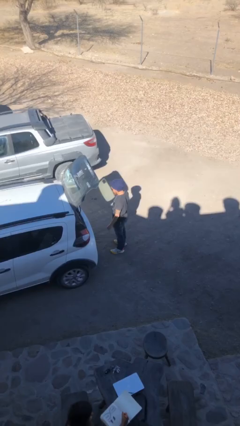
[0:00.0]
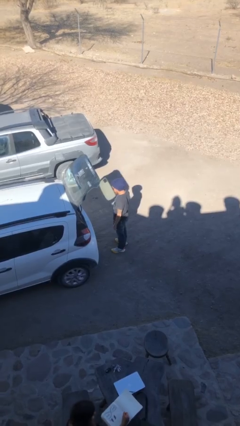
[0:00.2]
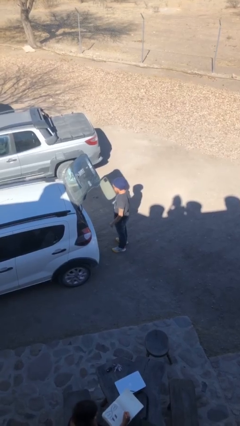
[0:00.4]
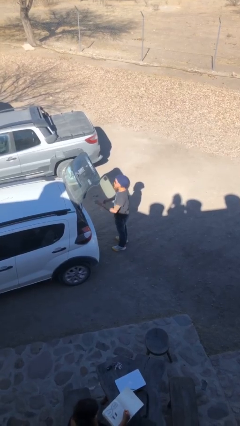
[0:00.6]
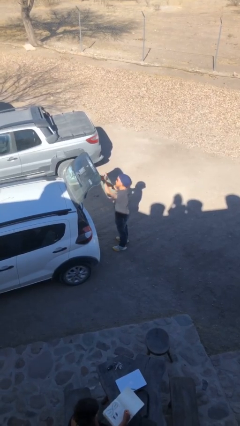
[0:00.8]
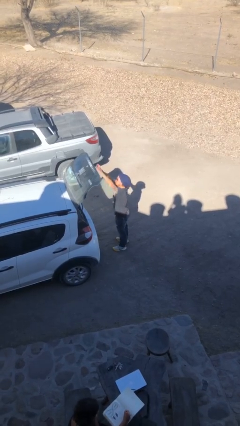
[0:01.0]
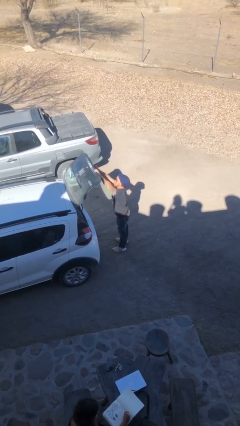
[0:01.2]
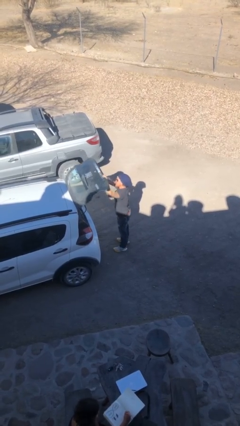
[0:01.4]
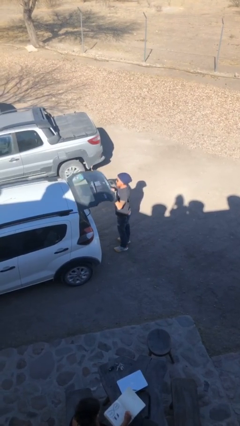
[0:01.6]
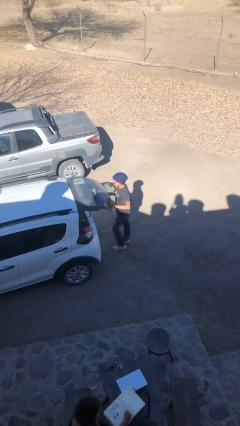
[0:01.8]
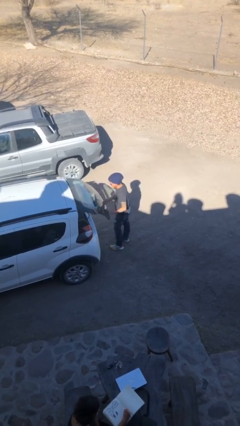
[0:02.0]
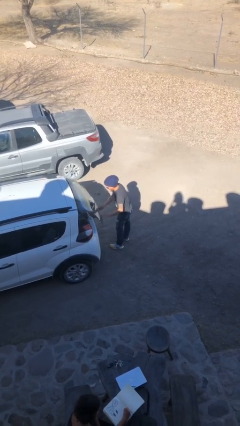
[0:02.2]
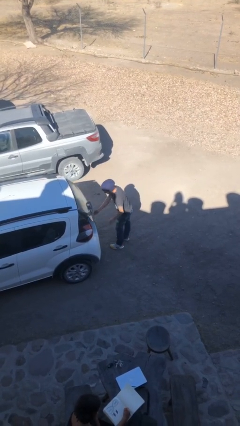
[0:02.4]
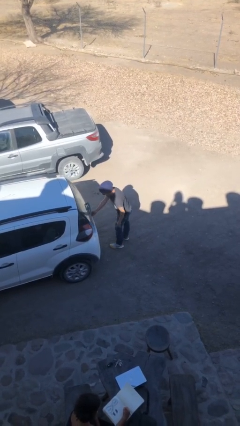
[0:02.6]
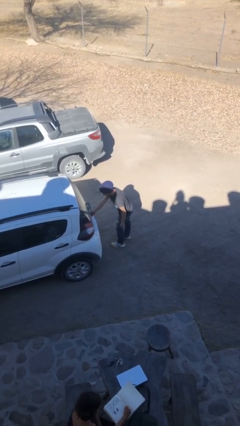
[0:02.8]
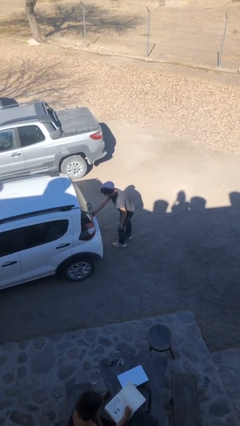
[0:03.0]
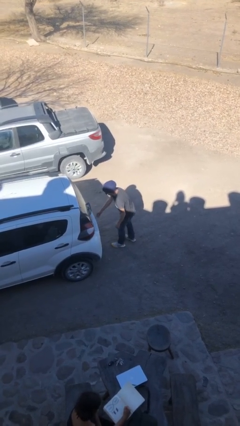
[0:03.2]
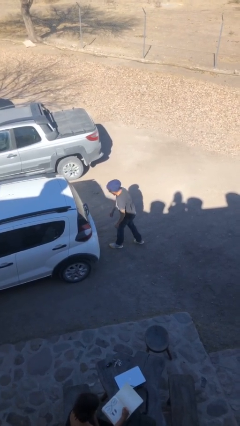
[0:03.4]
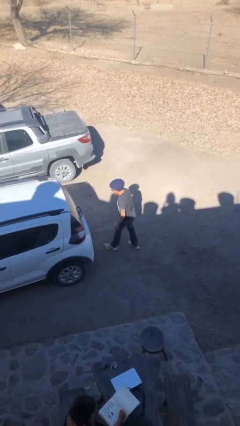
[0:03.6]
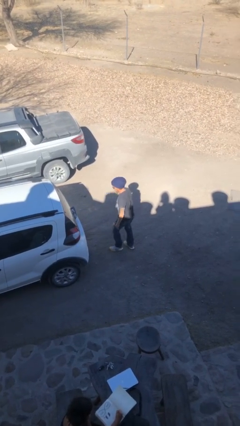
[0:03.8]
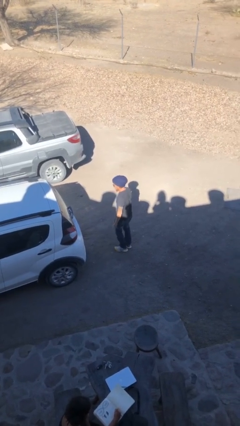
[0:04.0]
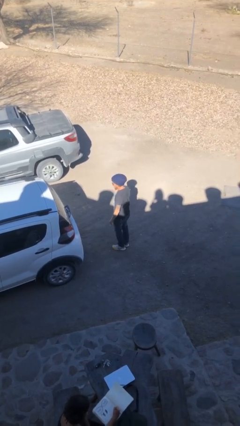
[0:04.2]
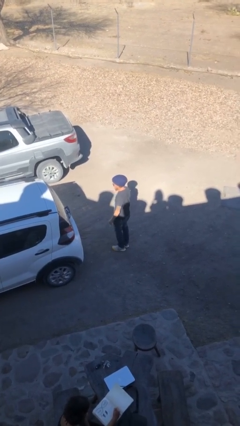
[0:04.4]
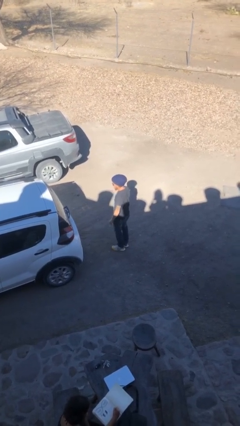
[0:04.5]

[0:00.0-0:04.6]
person closes car trunk

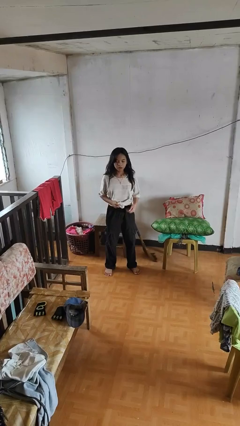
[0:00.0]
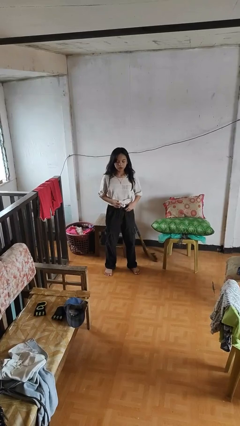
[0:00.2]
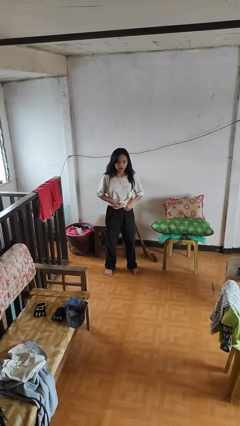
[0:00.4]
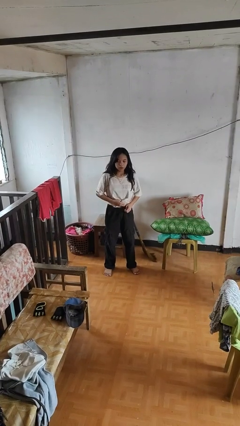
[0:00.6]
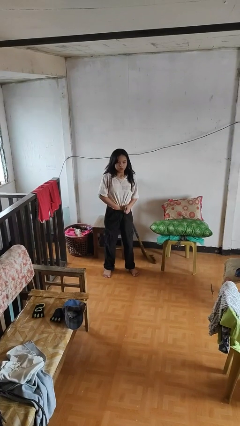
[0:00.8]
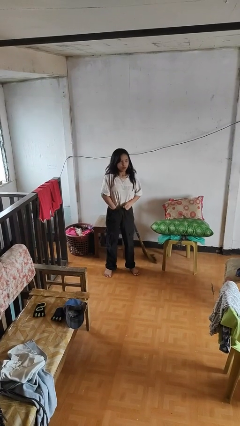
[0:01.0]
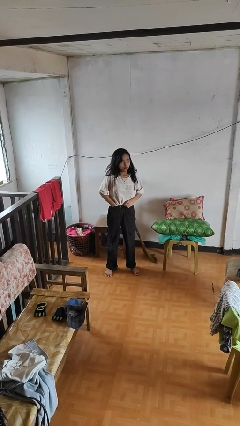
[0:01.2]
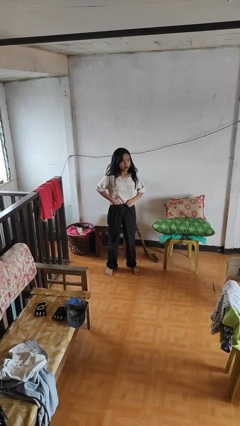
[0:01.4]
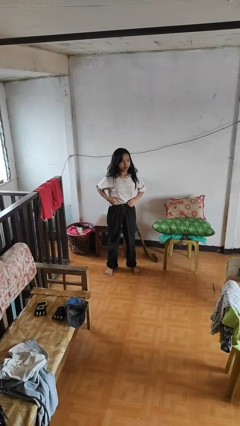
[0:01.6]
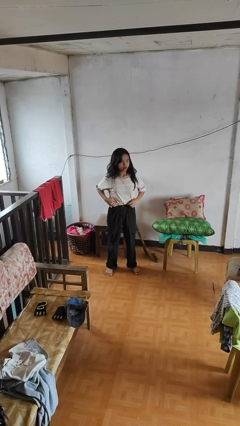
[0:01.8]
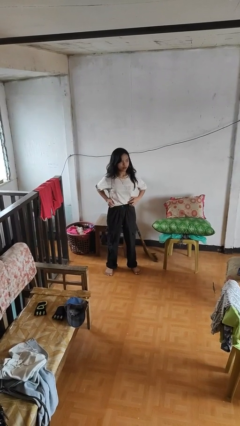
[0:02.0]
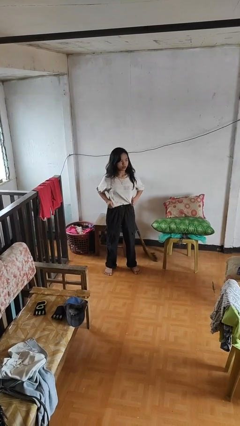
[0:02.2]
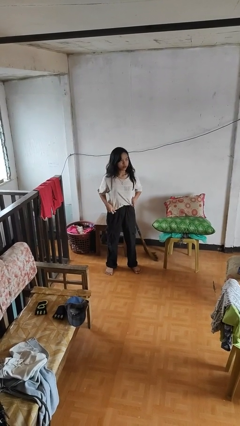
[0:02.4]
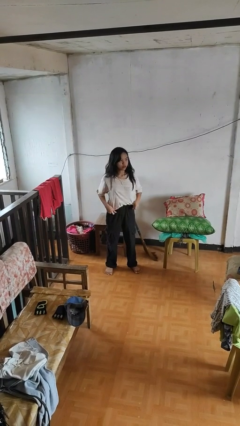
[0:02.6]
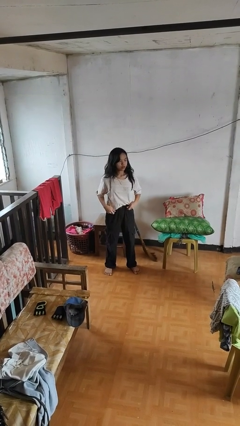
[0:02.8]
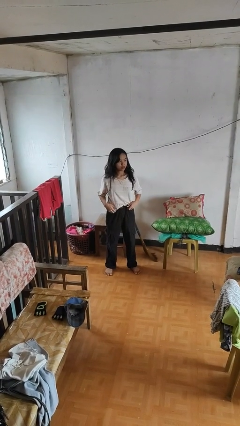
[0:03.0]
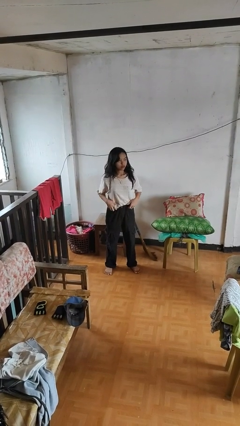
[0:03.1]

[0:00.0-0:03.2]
person tucks in shirt

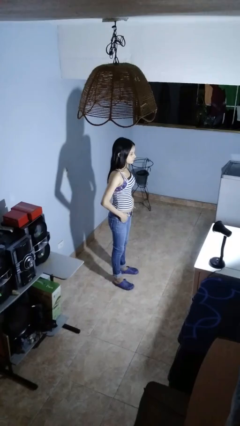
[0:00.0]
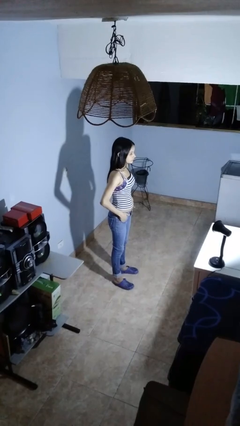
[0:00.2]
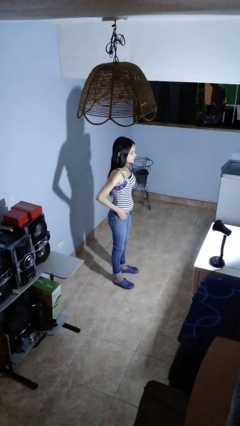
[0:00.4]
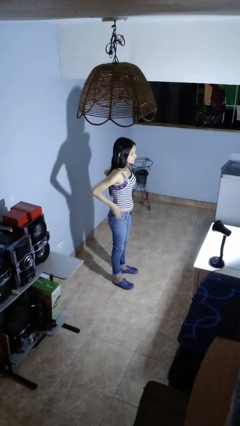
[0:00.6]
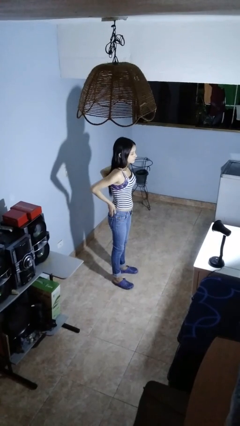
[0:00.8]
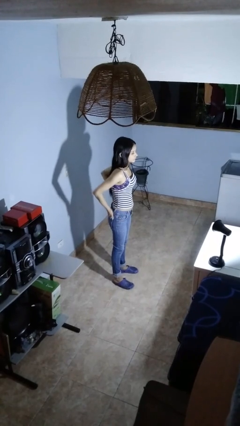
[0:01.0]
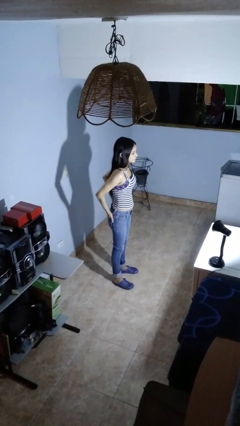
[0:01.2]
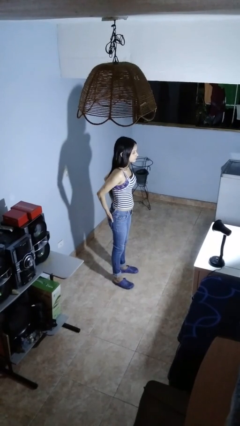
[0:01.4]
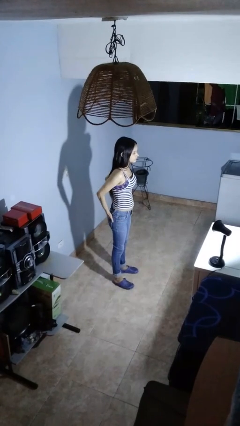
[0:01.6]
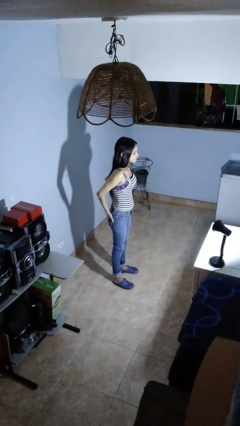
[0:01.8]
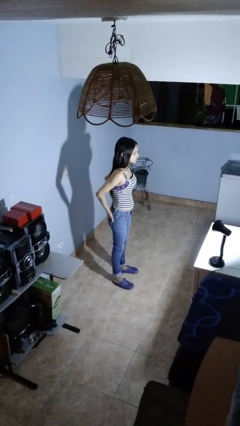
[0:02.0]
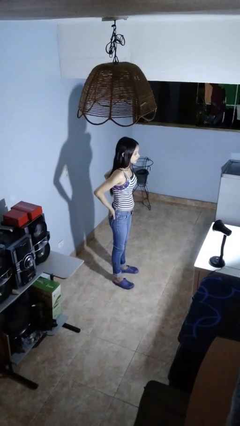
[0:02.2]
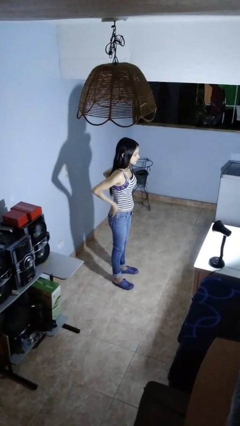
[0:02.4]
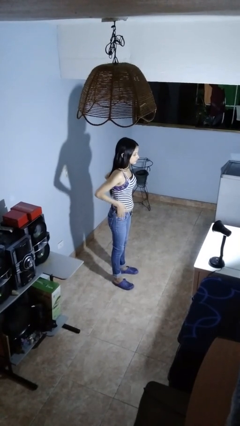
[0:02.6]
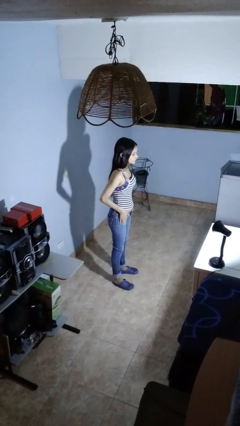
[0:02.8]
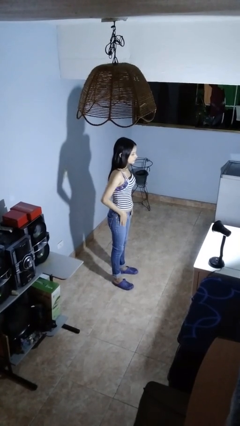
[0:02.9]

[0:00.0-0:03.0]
person puts hands in back pockets

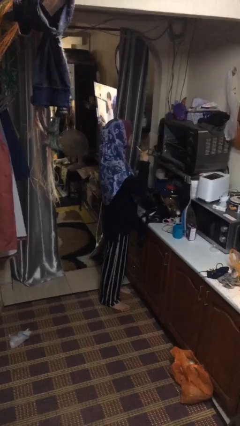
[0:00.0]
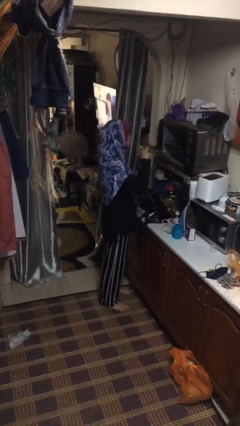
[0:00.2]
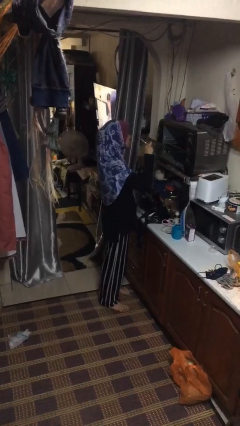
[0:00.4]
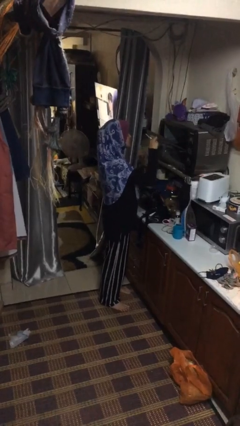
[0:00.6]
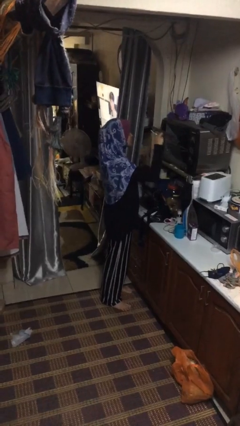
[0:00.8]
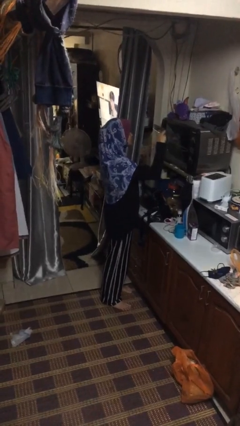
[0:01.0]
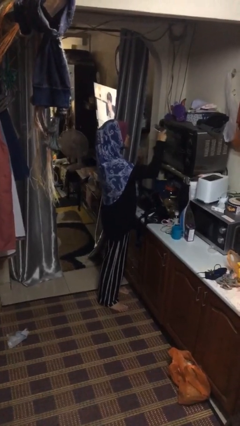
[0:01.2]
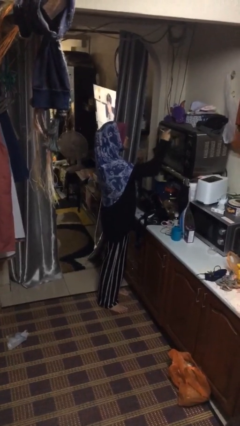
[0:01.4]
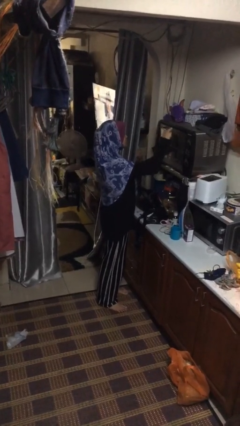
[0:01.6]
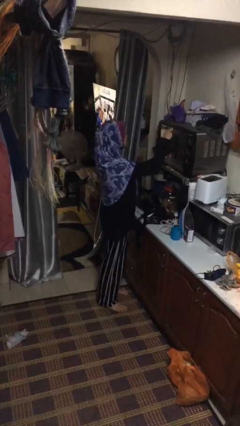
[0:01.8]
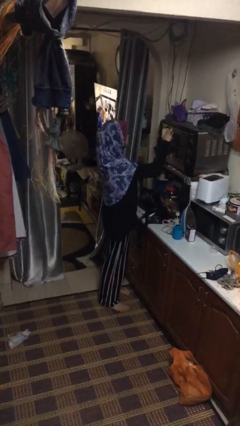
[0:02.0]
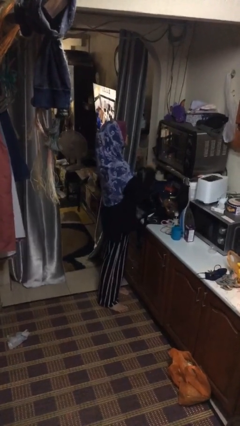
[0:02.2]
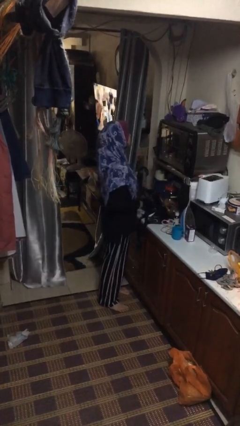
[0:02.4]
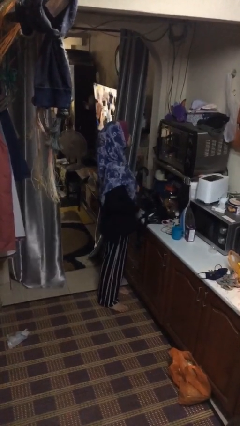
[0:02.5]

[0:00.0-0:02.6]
person closes oven door

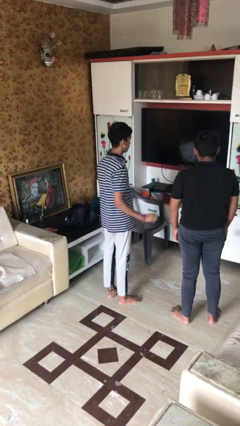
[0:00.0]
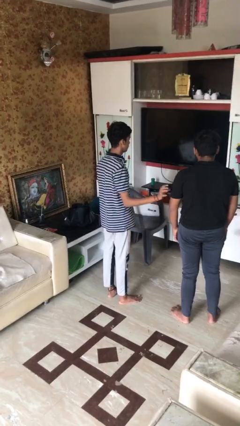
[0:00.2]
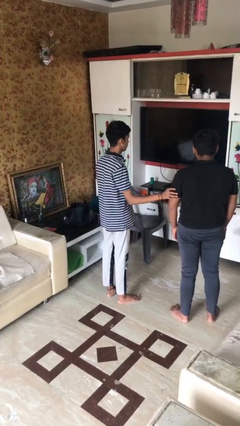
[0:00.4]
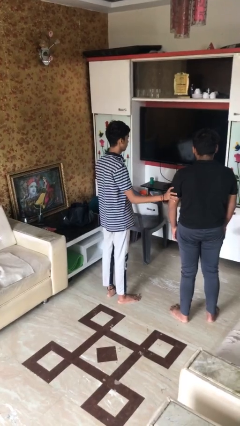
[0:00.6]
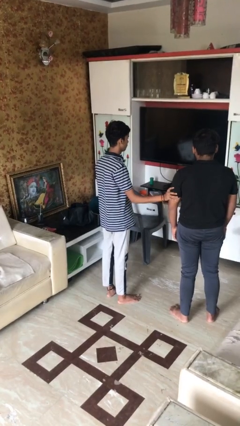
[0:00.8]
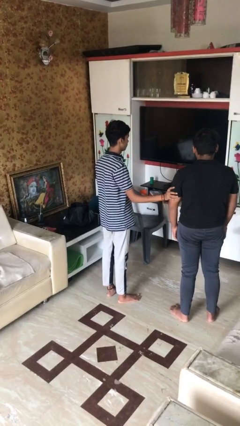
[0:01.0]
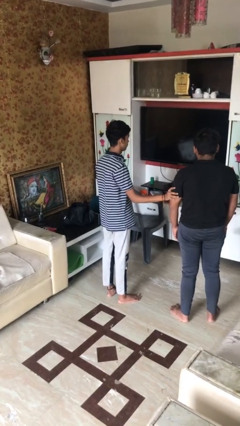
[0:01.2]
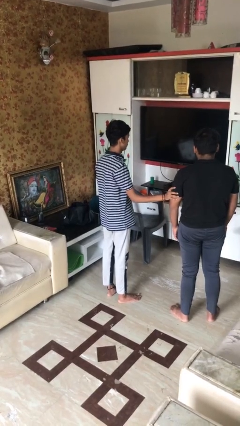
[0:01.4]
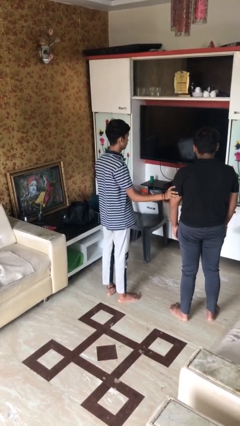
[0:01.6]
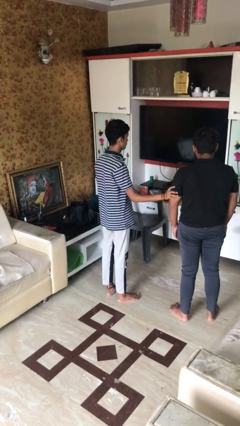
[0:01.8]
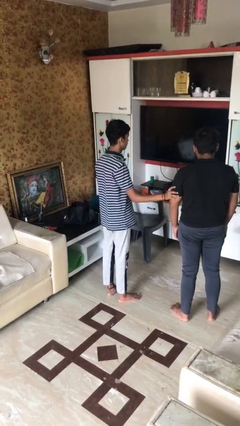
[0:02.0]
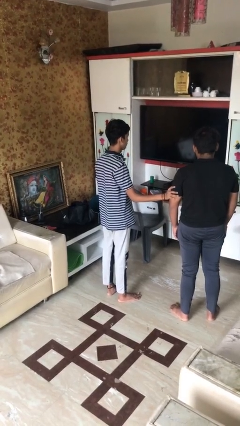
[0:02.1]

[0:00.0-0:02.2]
person grabs person by bicep

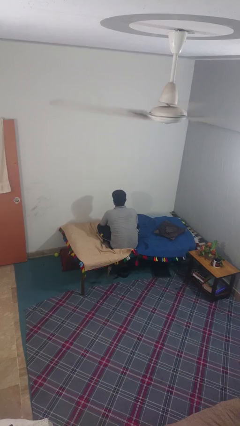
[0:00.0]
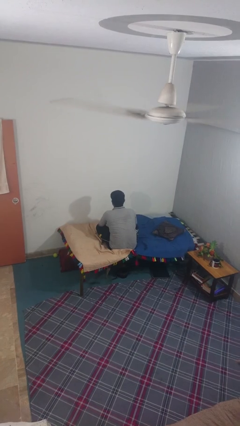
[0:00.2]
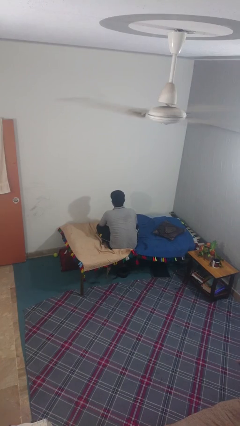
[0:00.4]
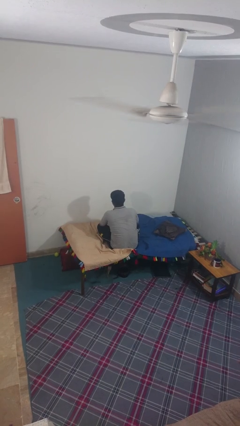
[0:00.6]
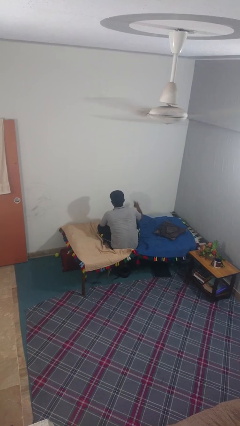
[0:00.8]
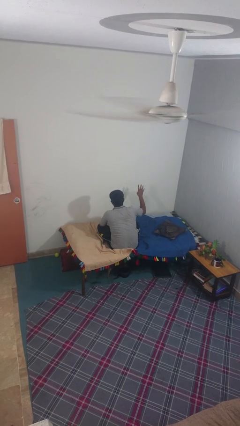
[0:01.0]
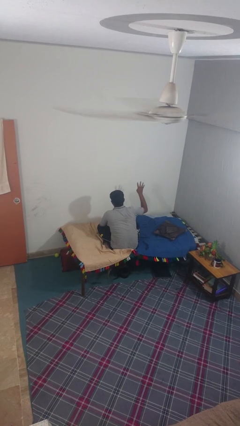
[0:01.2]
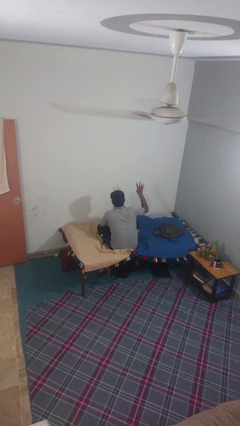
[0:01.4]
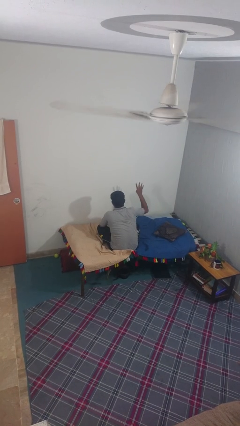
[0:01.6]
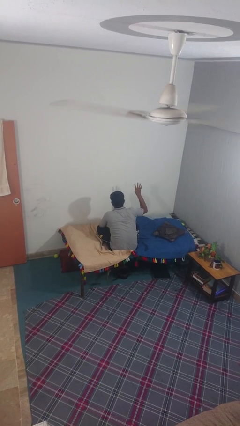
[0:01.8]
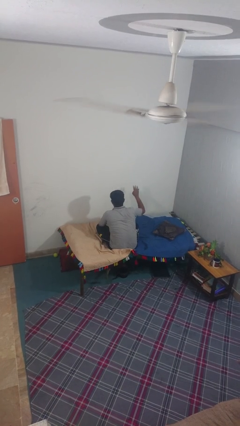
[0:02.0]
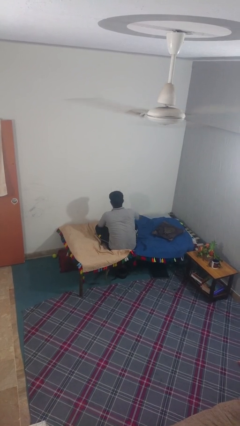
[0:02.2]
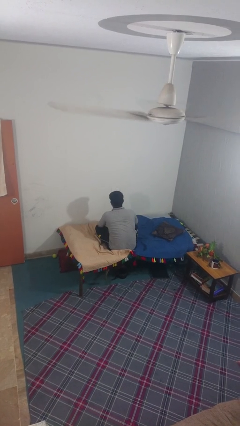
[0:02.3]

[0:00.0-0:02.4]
person gestures number four
